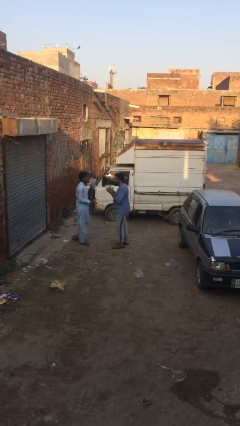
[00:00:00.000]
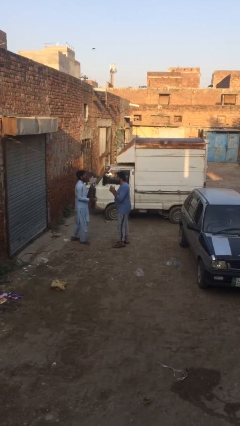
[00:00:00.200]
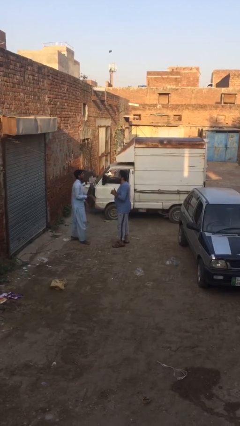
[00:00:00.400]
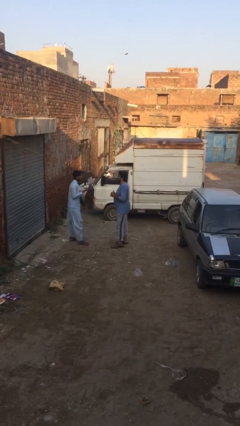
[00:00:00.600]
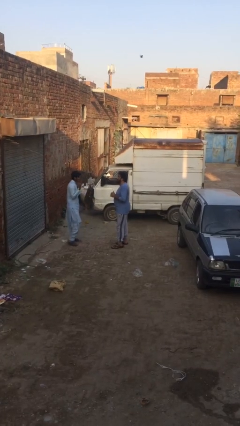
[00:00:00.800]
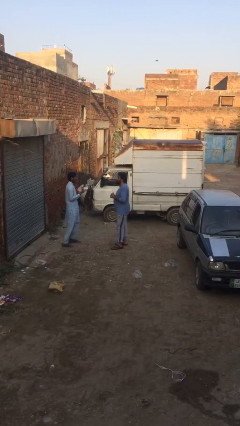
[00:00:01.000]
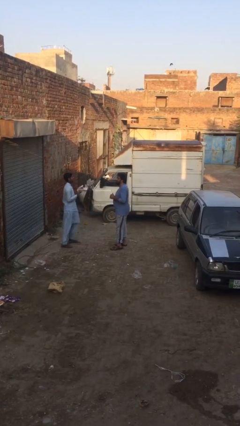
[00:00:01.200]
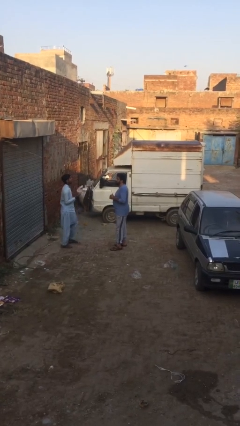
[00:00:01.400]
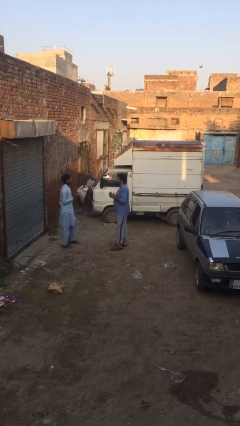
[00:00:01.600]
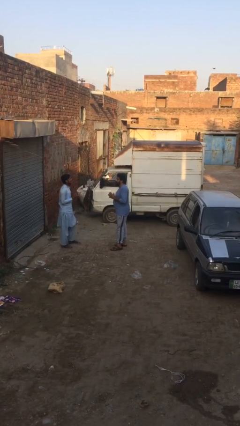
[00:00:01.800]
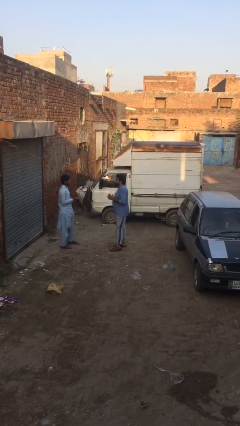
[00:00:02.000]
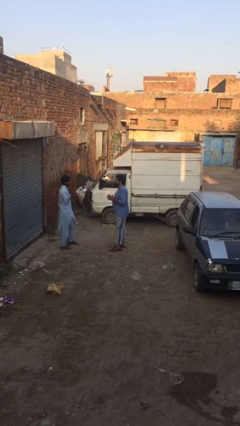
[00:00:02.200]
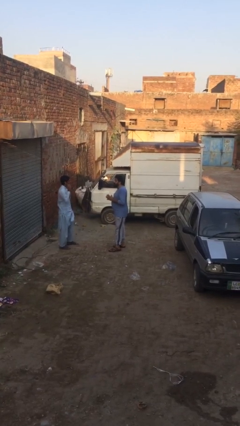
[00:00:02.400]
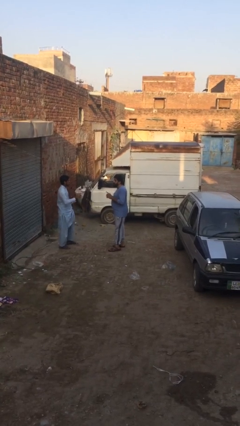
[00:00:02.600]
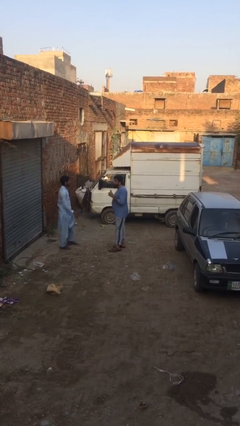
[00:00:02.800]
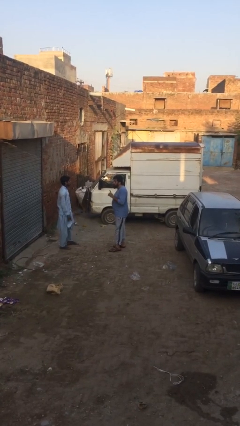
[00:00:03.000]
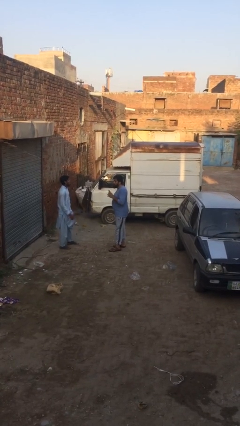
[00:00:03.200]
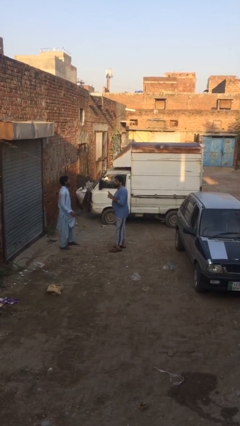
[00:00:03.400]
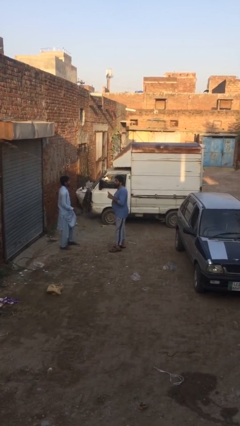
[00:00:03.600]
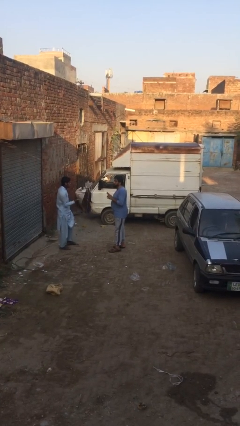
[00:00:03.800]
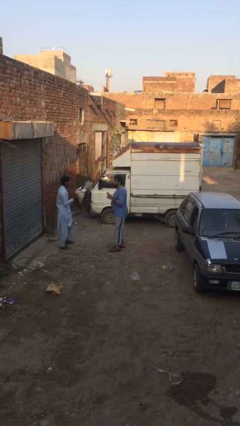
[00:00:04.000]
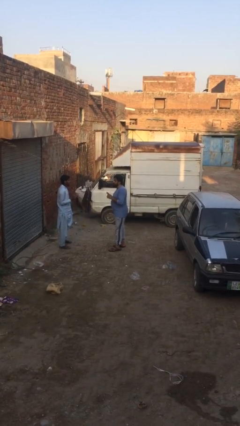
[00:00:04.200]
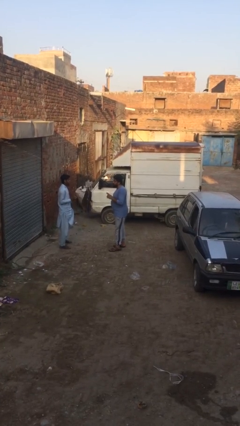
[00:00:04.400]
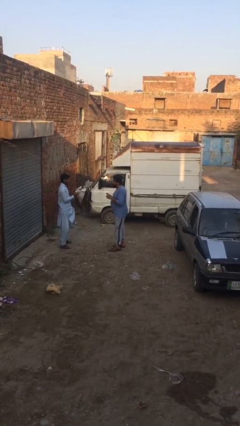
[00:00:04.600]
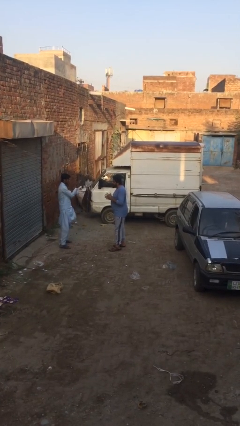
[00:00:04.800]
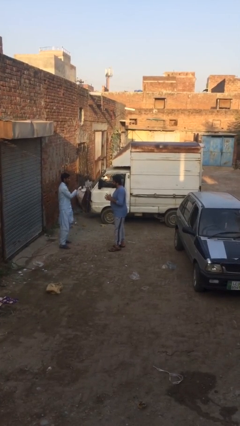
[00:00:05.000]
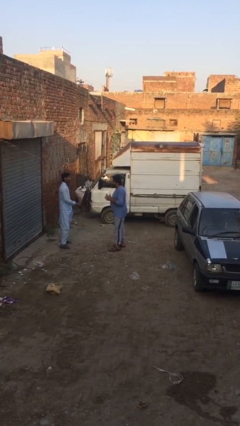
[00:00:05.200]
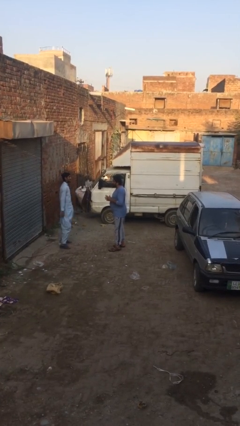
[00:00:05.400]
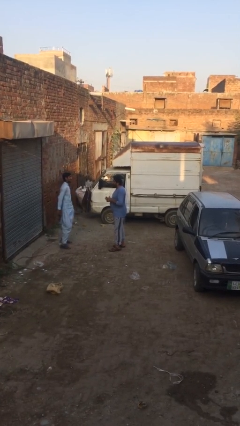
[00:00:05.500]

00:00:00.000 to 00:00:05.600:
person talks to person

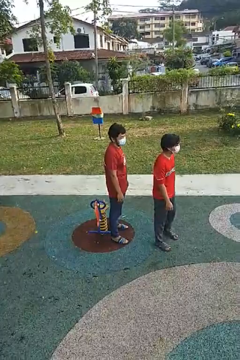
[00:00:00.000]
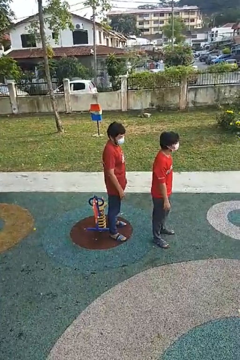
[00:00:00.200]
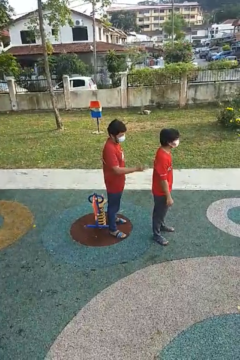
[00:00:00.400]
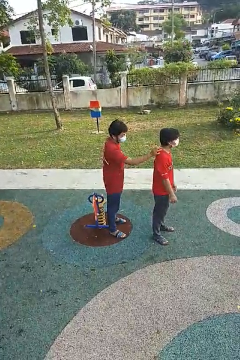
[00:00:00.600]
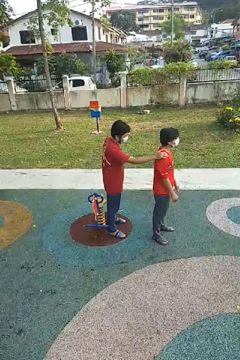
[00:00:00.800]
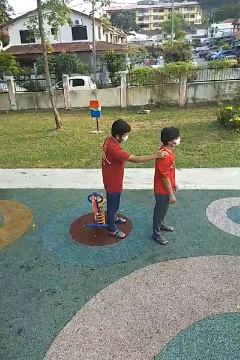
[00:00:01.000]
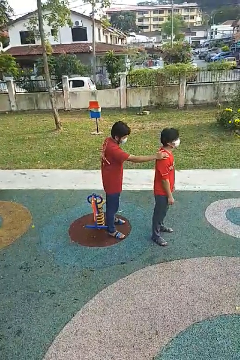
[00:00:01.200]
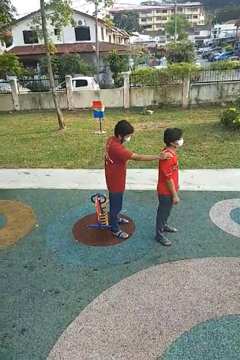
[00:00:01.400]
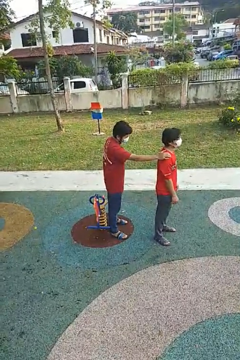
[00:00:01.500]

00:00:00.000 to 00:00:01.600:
person grabs person by shoulder

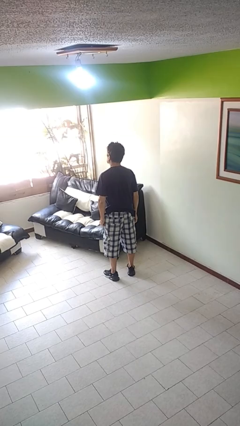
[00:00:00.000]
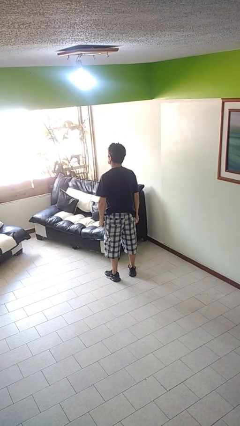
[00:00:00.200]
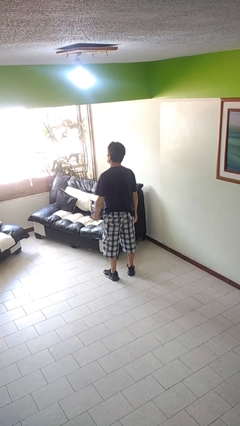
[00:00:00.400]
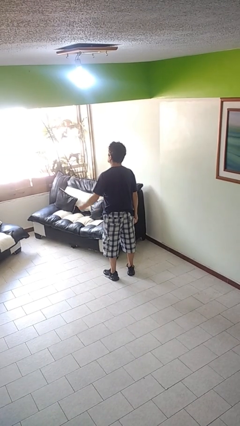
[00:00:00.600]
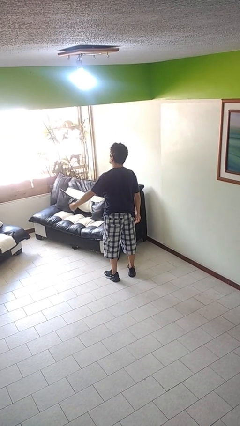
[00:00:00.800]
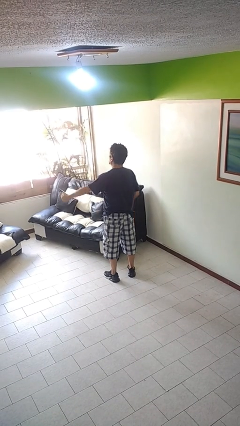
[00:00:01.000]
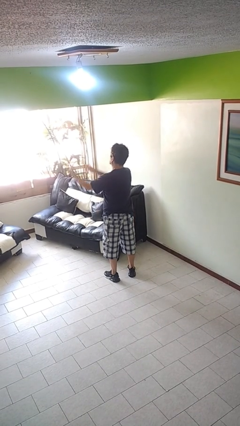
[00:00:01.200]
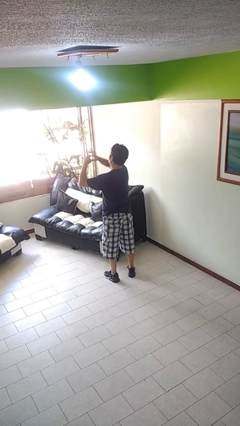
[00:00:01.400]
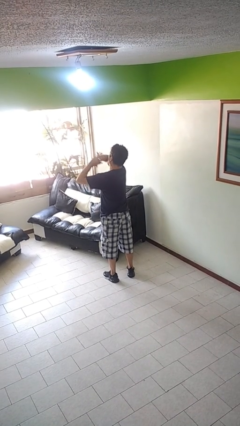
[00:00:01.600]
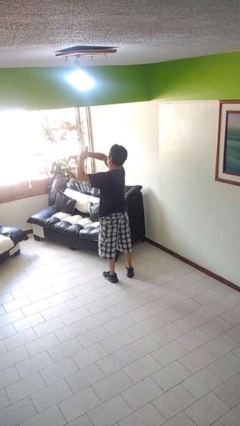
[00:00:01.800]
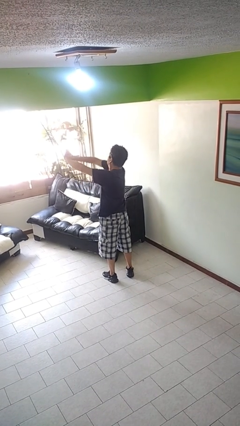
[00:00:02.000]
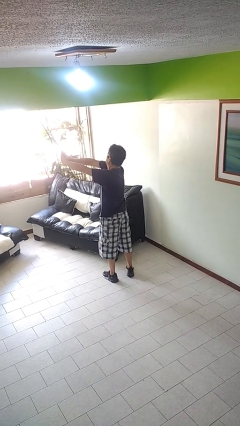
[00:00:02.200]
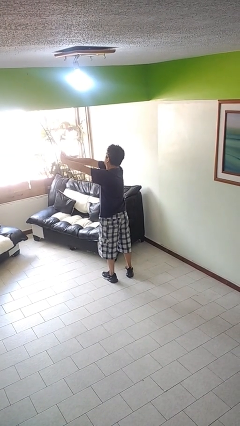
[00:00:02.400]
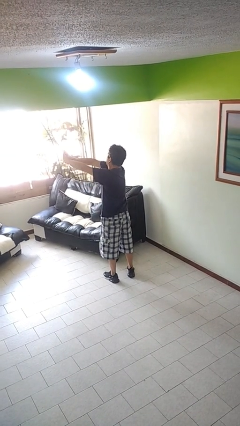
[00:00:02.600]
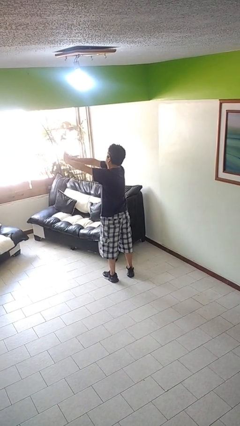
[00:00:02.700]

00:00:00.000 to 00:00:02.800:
person stretches arms to side

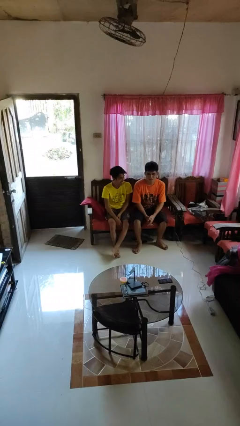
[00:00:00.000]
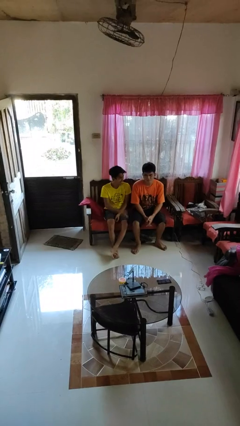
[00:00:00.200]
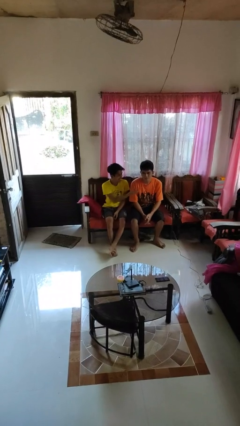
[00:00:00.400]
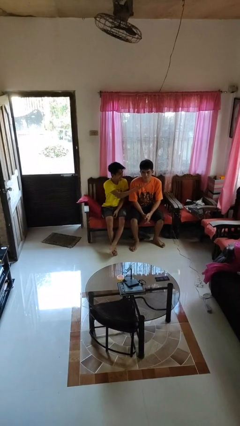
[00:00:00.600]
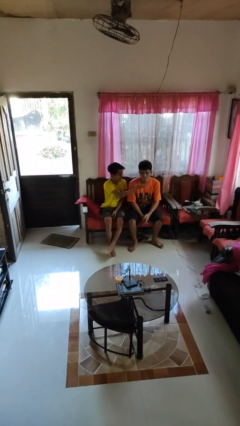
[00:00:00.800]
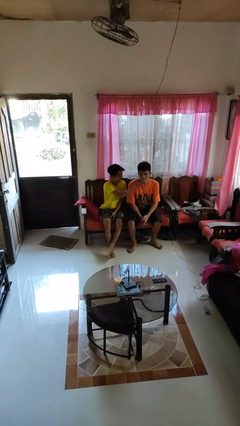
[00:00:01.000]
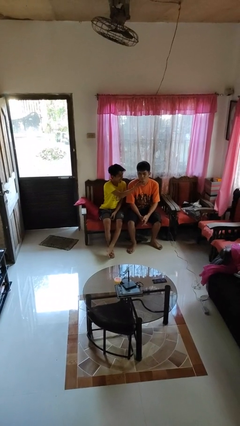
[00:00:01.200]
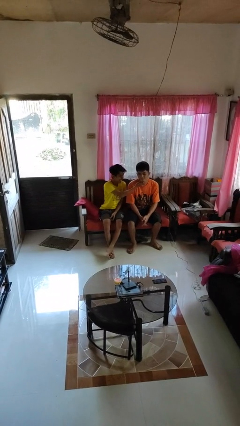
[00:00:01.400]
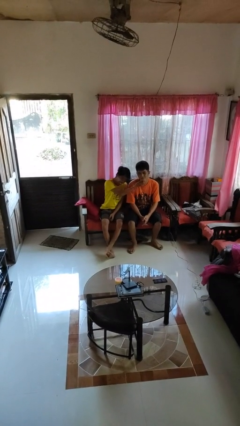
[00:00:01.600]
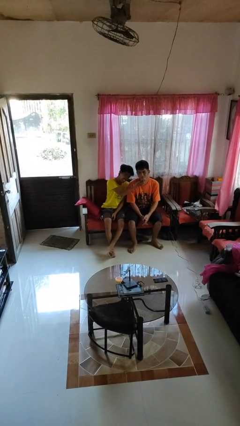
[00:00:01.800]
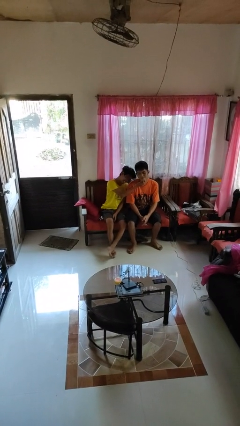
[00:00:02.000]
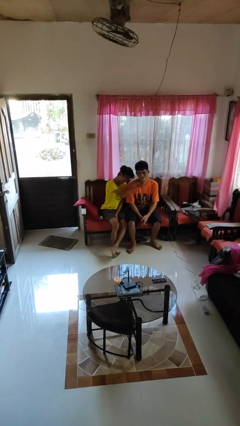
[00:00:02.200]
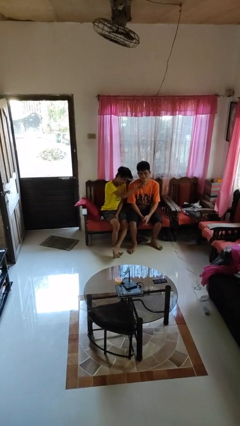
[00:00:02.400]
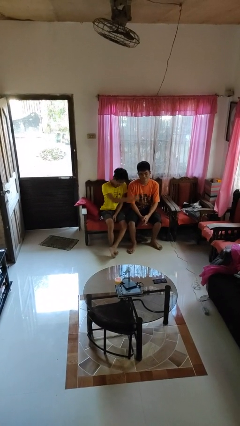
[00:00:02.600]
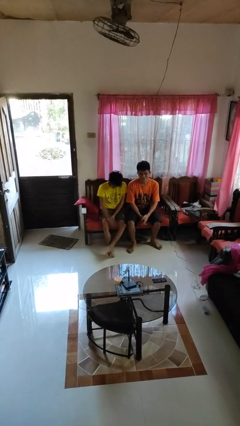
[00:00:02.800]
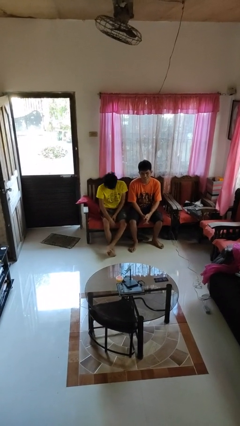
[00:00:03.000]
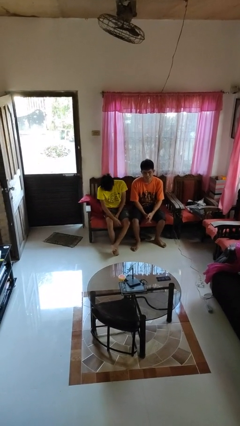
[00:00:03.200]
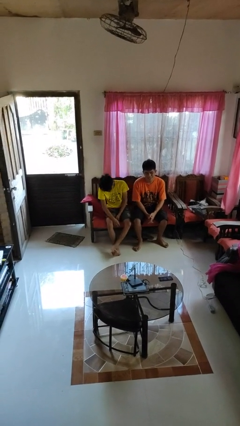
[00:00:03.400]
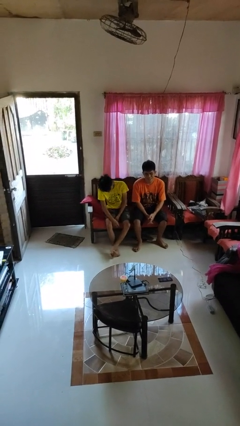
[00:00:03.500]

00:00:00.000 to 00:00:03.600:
person touches face of person

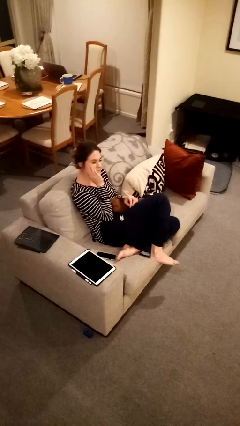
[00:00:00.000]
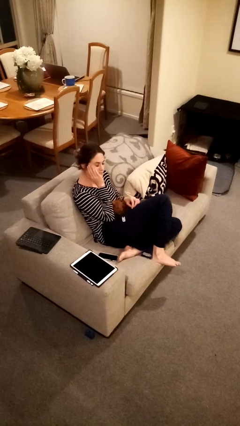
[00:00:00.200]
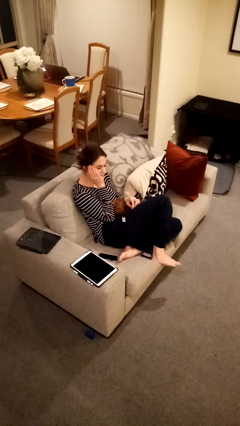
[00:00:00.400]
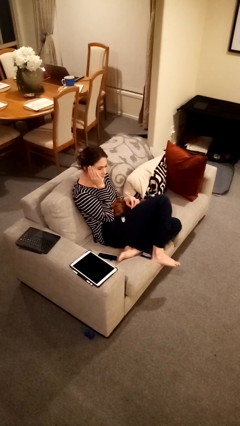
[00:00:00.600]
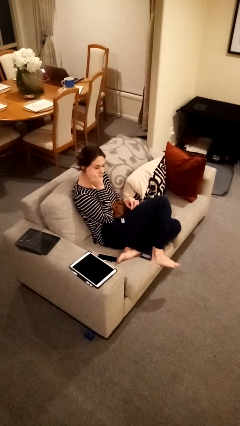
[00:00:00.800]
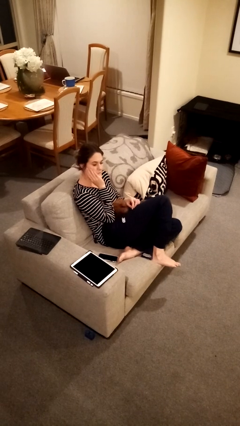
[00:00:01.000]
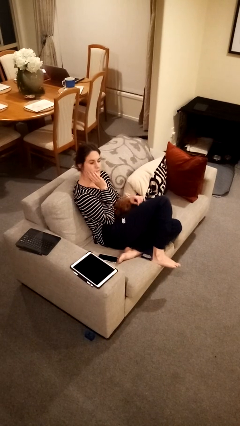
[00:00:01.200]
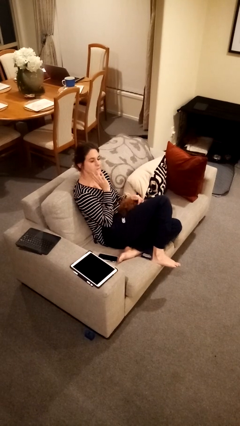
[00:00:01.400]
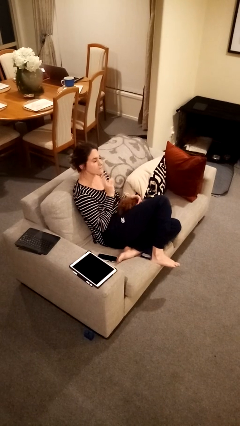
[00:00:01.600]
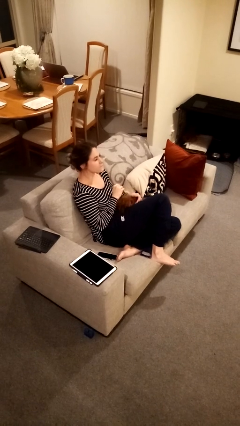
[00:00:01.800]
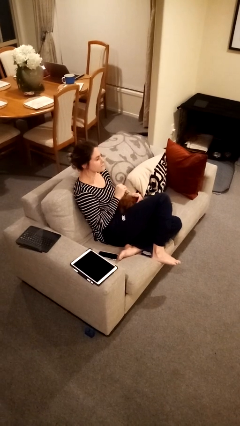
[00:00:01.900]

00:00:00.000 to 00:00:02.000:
person scratches face

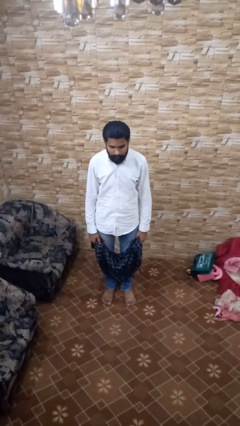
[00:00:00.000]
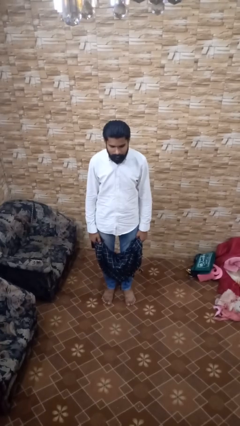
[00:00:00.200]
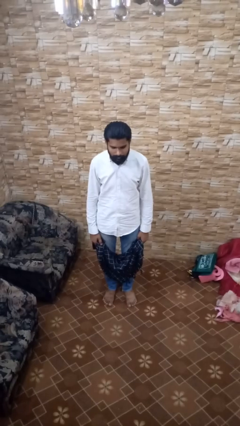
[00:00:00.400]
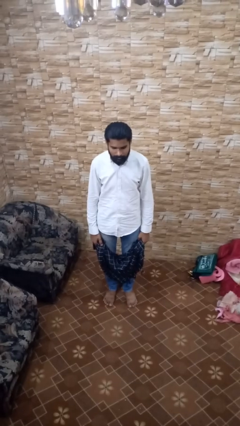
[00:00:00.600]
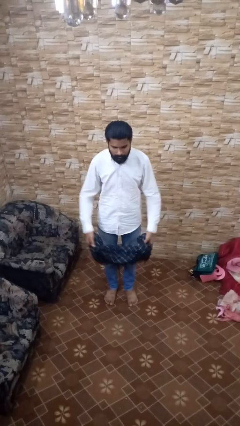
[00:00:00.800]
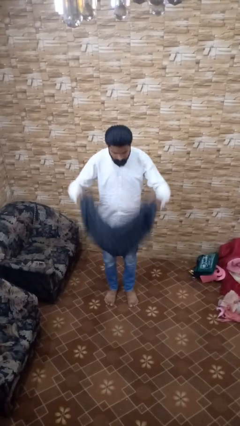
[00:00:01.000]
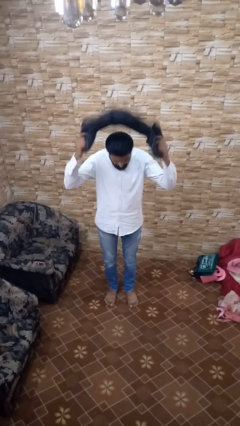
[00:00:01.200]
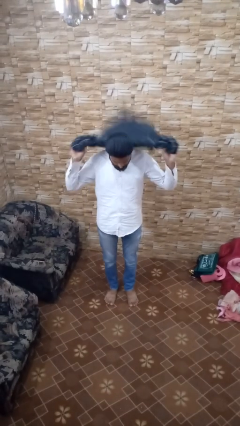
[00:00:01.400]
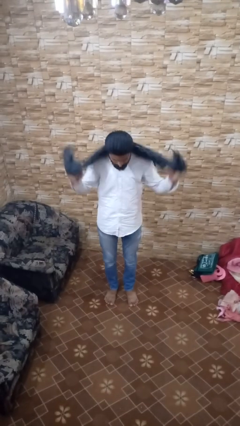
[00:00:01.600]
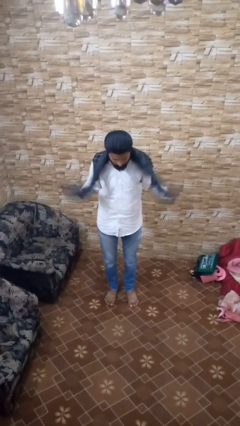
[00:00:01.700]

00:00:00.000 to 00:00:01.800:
person puts on scarf
